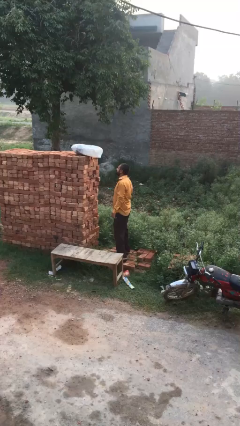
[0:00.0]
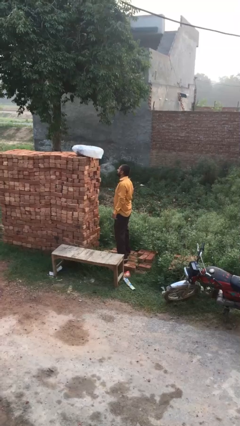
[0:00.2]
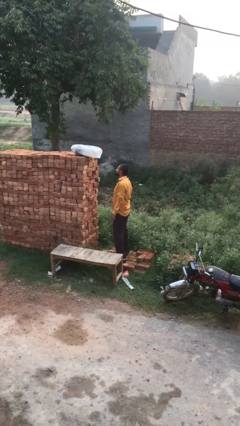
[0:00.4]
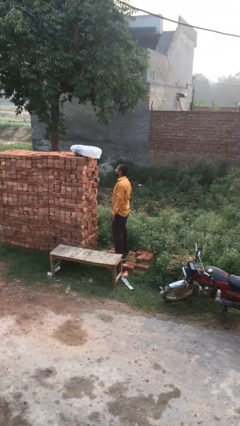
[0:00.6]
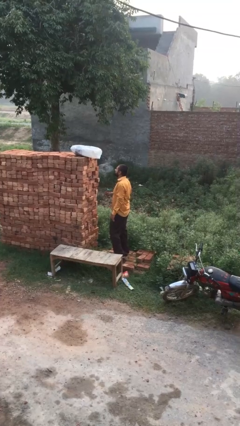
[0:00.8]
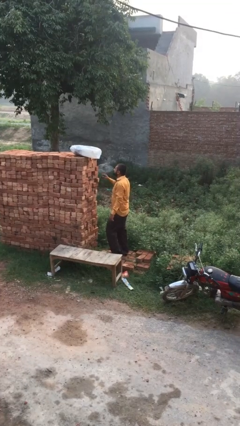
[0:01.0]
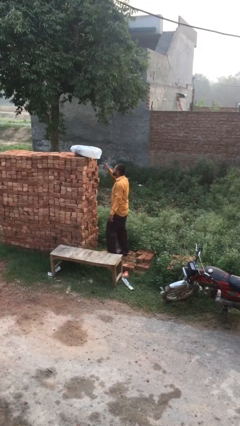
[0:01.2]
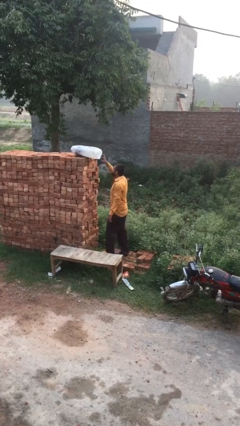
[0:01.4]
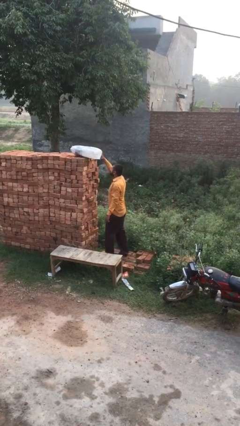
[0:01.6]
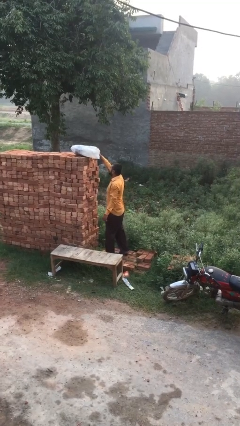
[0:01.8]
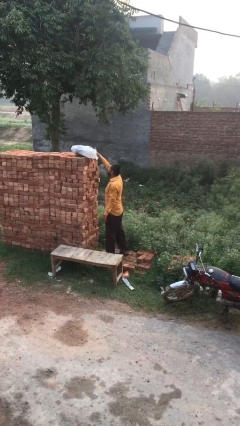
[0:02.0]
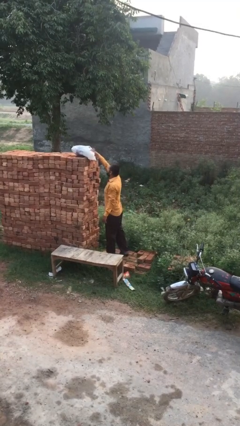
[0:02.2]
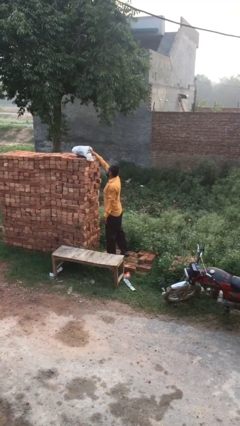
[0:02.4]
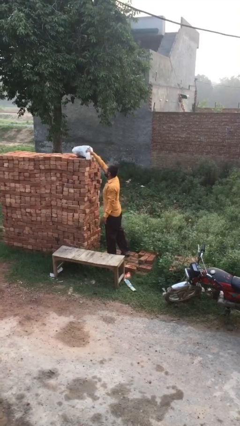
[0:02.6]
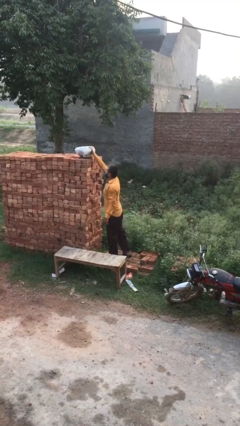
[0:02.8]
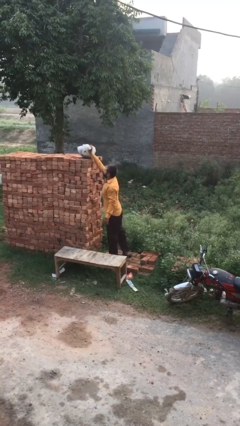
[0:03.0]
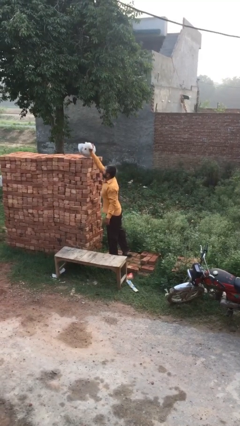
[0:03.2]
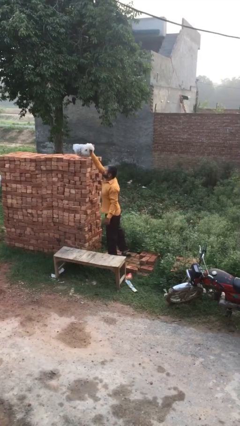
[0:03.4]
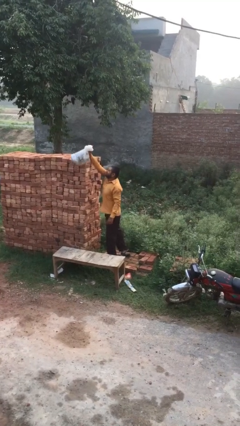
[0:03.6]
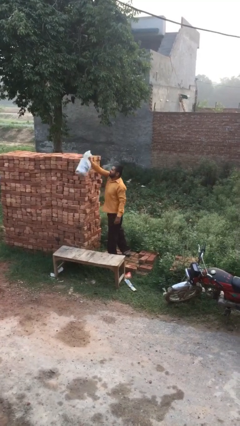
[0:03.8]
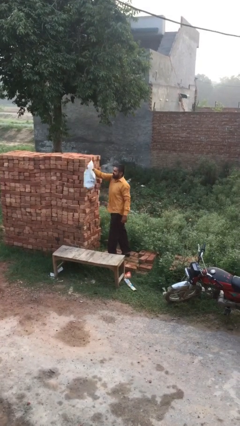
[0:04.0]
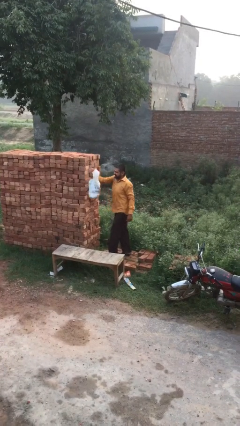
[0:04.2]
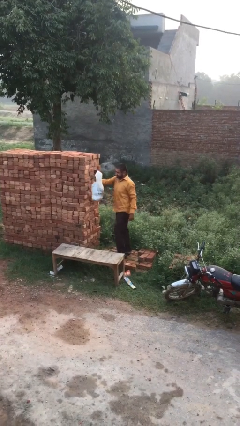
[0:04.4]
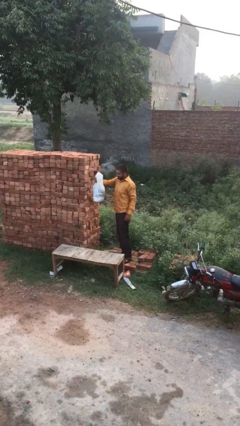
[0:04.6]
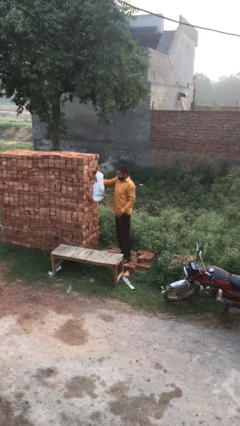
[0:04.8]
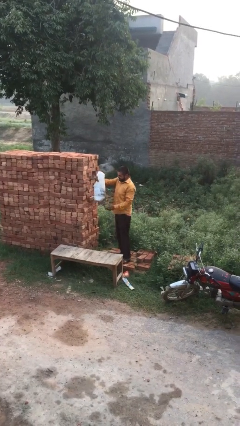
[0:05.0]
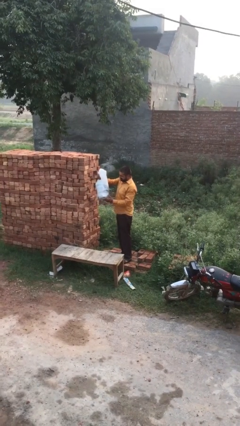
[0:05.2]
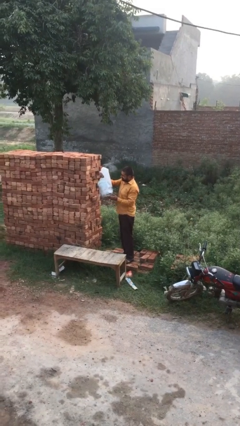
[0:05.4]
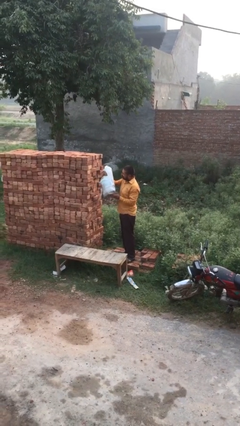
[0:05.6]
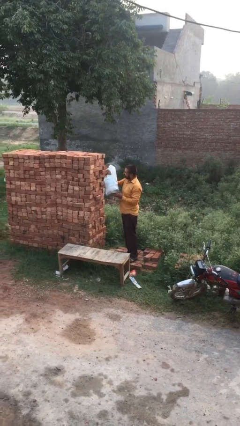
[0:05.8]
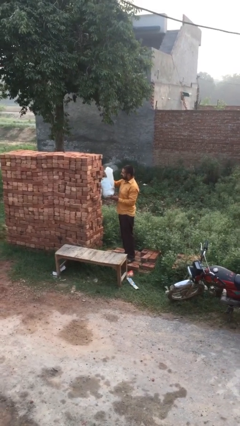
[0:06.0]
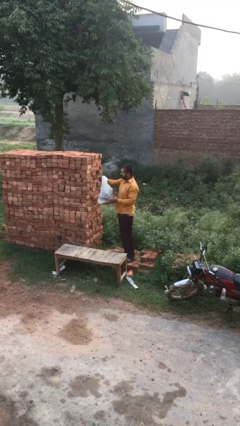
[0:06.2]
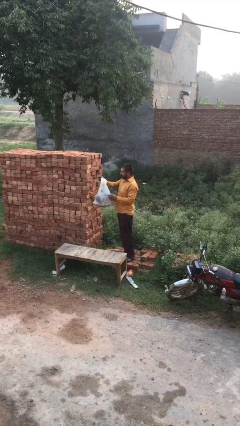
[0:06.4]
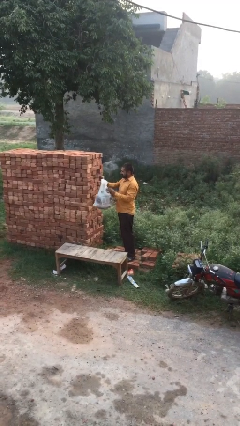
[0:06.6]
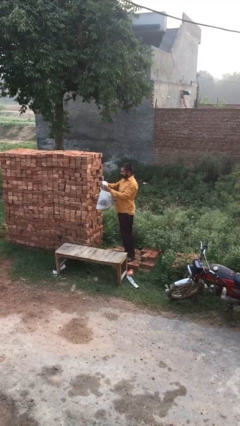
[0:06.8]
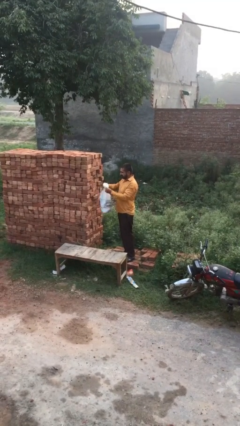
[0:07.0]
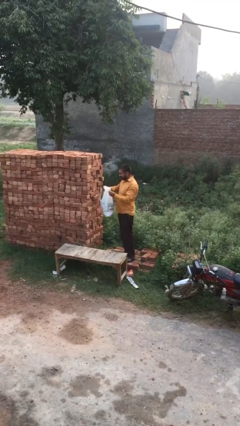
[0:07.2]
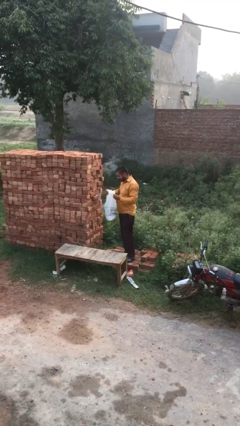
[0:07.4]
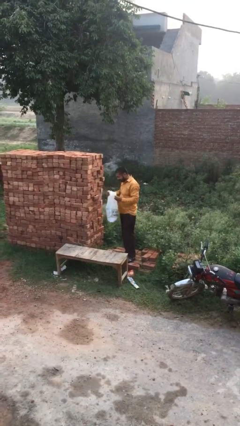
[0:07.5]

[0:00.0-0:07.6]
person picks up object from shelf

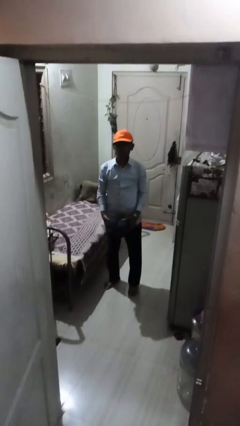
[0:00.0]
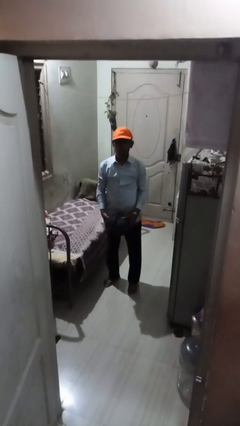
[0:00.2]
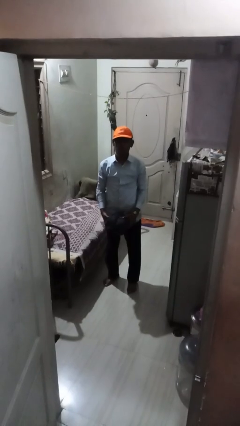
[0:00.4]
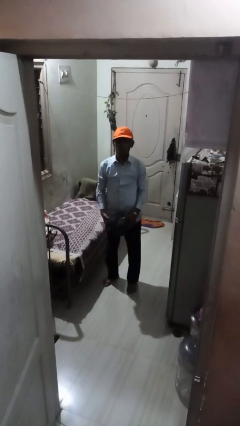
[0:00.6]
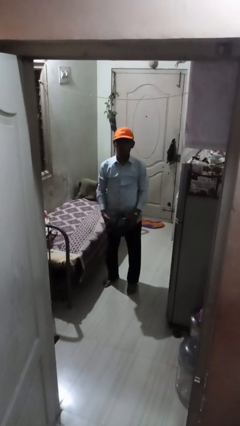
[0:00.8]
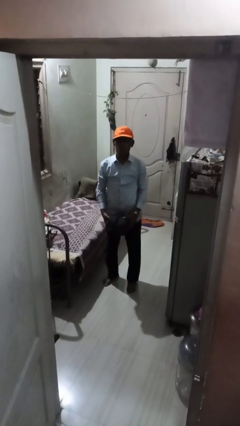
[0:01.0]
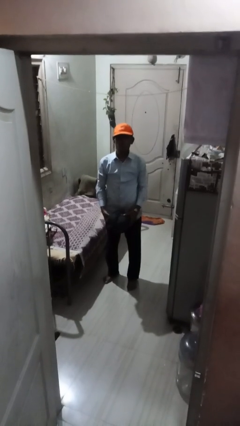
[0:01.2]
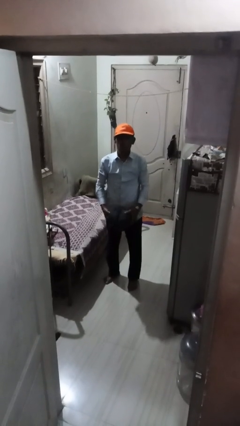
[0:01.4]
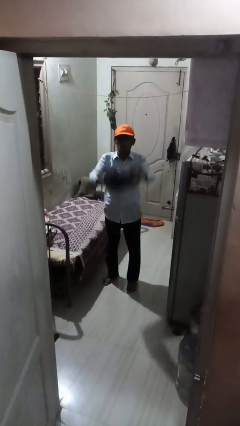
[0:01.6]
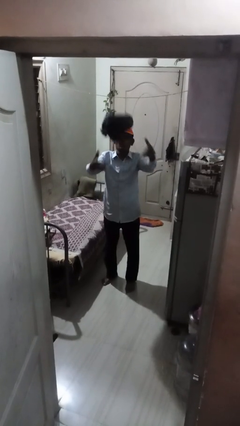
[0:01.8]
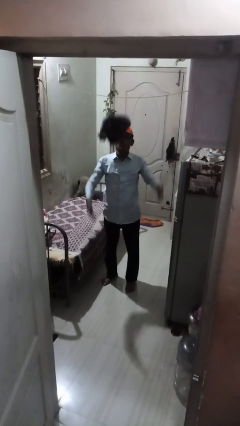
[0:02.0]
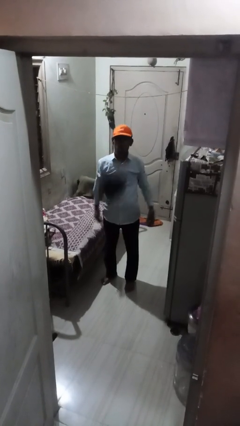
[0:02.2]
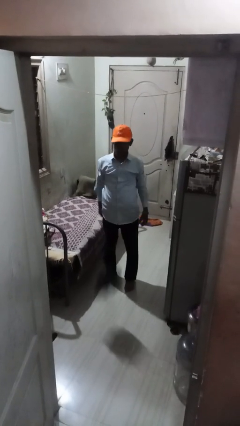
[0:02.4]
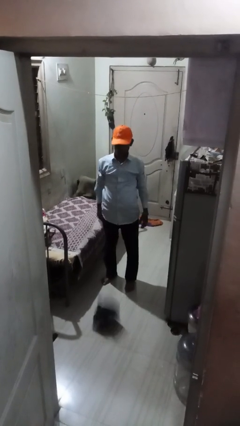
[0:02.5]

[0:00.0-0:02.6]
person throws object into air

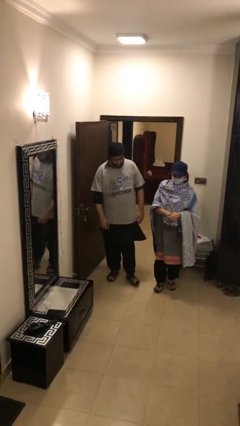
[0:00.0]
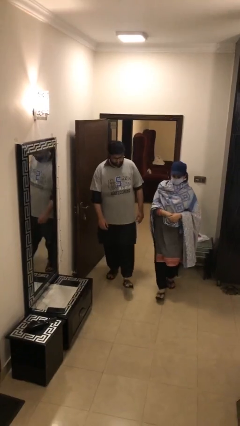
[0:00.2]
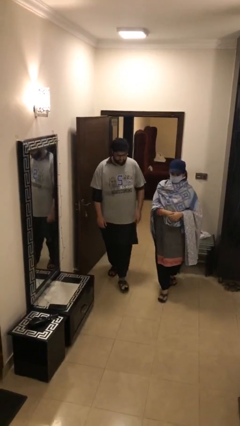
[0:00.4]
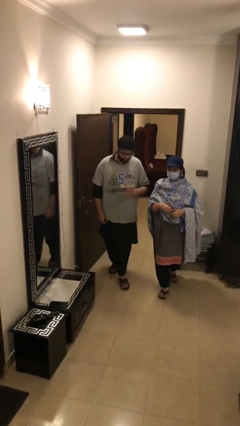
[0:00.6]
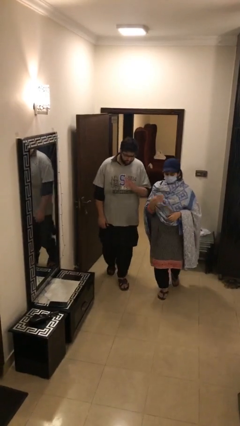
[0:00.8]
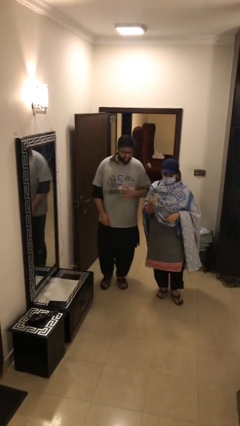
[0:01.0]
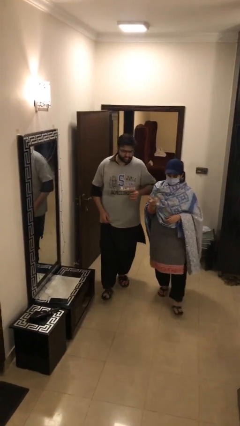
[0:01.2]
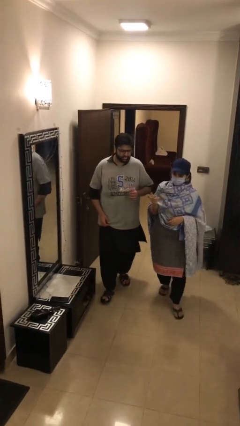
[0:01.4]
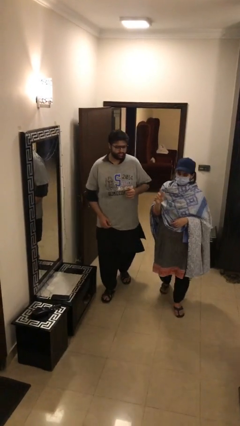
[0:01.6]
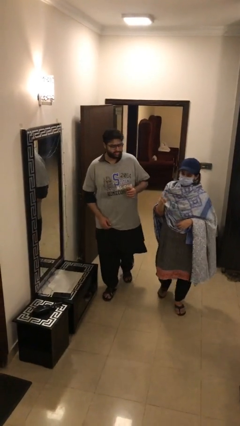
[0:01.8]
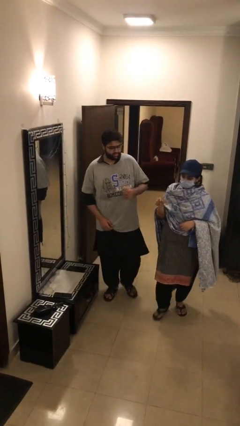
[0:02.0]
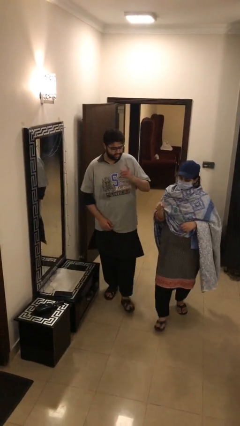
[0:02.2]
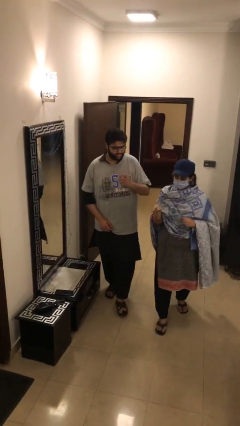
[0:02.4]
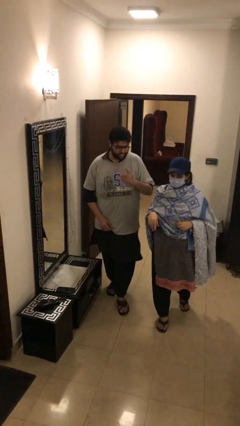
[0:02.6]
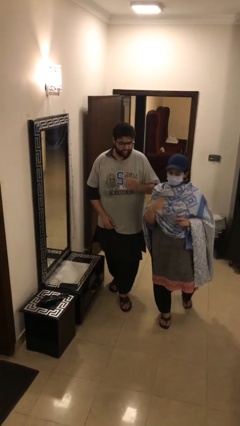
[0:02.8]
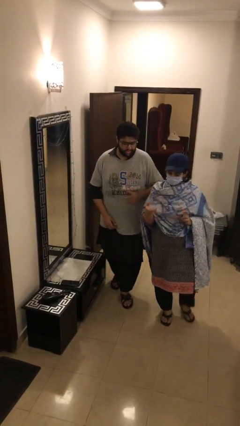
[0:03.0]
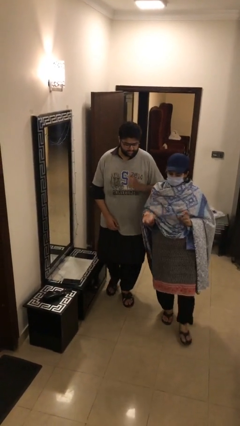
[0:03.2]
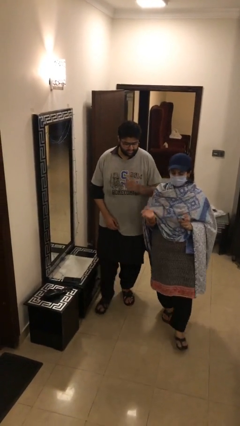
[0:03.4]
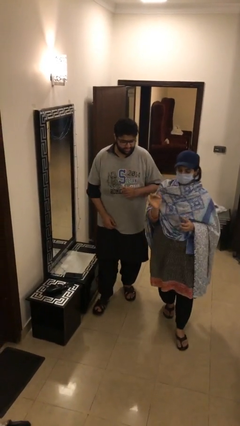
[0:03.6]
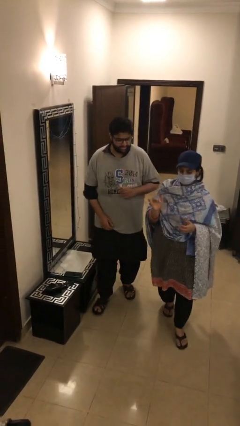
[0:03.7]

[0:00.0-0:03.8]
person talks to person

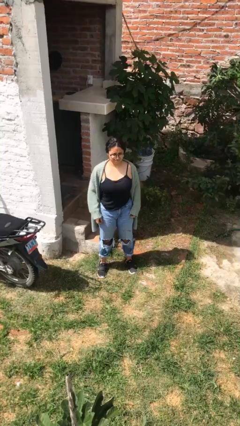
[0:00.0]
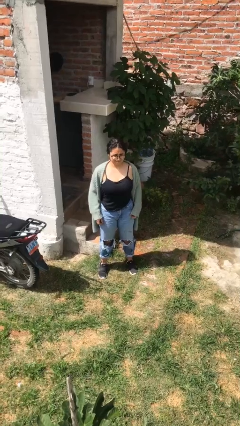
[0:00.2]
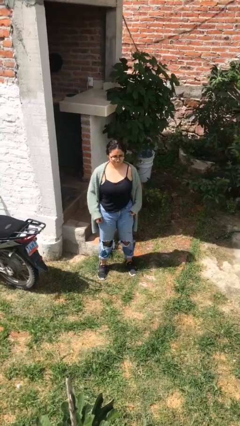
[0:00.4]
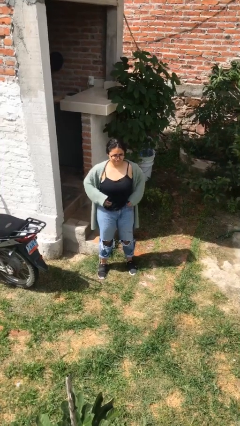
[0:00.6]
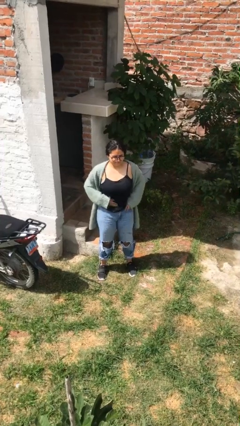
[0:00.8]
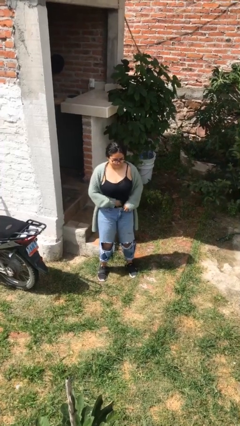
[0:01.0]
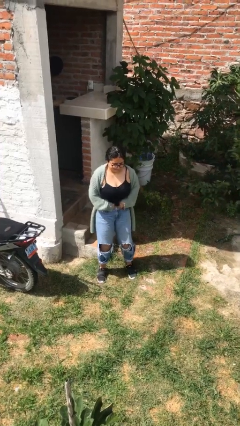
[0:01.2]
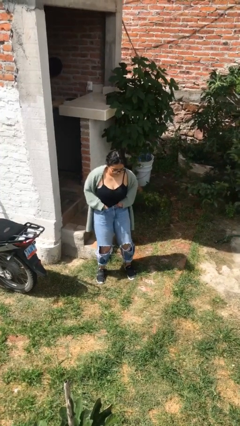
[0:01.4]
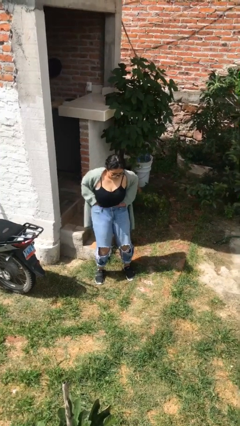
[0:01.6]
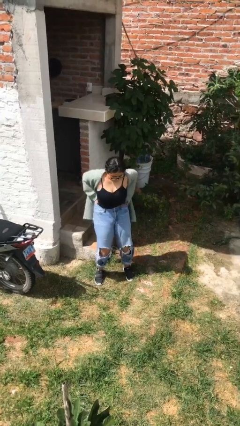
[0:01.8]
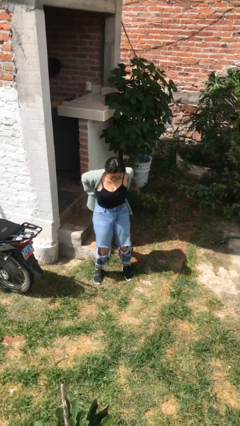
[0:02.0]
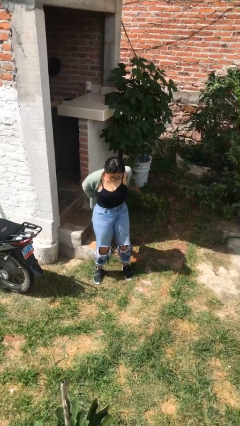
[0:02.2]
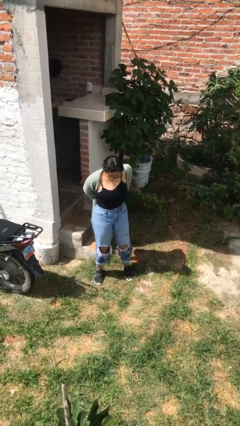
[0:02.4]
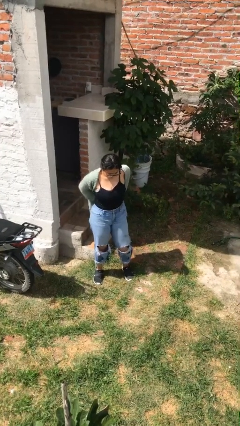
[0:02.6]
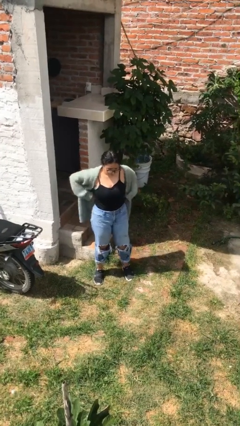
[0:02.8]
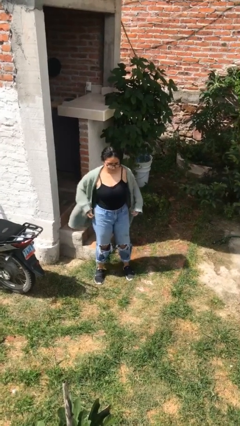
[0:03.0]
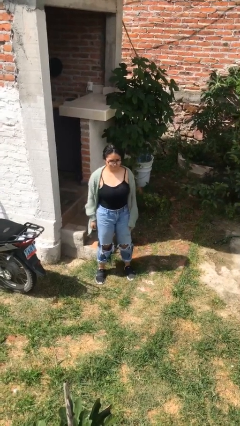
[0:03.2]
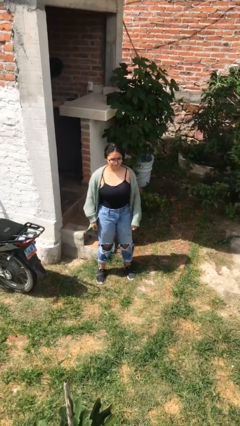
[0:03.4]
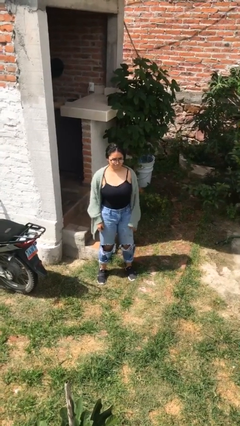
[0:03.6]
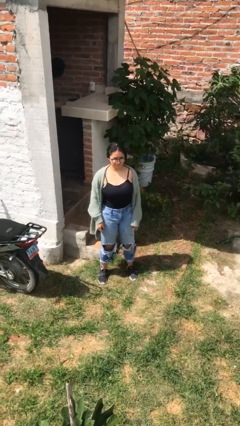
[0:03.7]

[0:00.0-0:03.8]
person tucks in shirt
